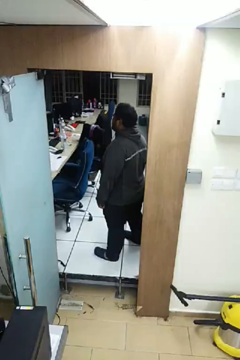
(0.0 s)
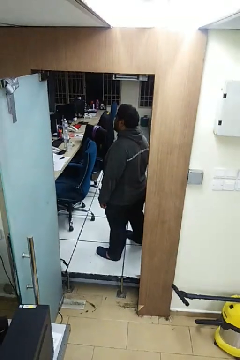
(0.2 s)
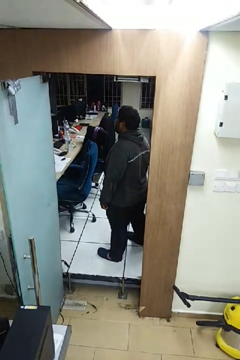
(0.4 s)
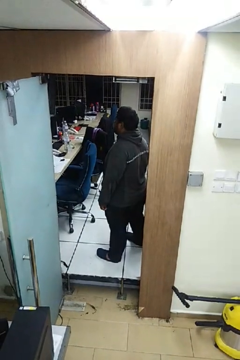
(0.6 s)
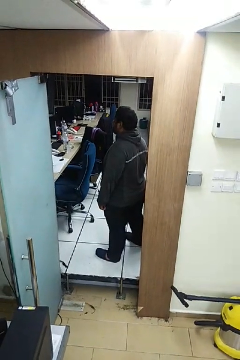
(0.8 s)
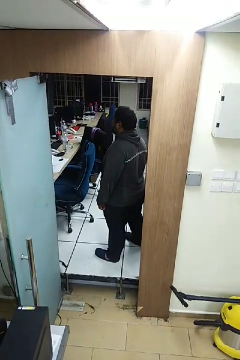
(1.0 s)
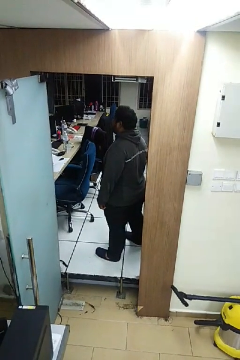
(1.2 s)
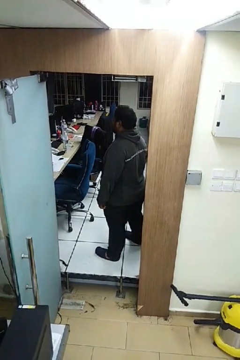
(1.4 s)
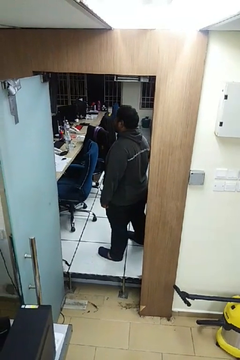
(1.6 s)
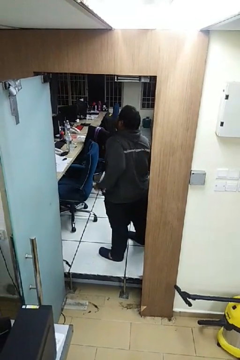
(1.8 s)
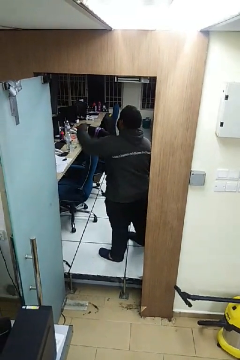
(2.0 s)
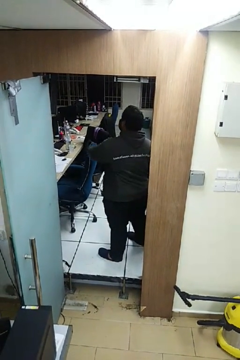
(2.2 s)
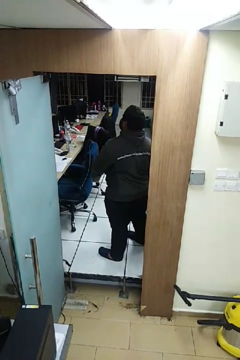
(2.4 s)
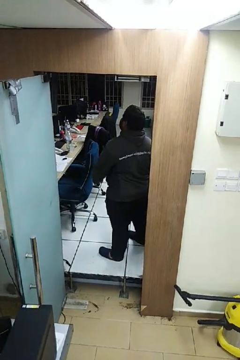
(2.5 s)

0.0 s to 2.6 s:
person punches

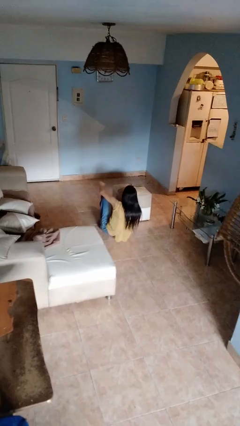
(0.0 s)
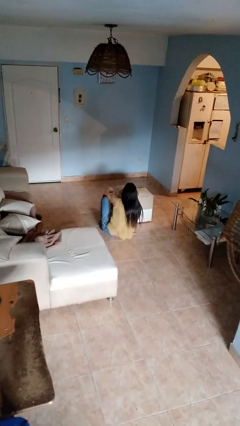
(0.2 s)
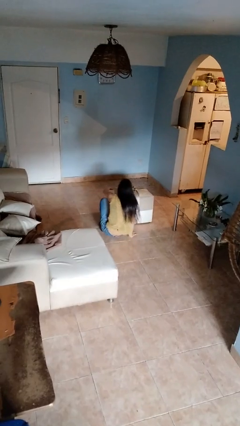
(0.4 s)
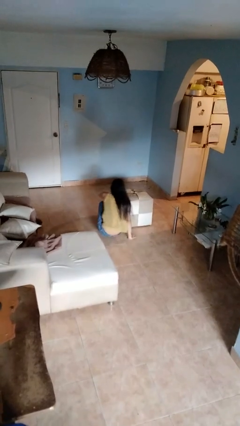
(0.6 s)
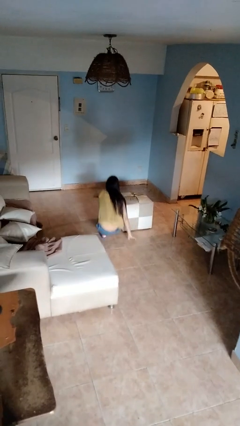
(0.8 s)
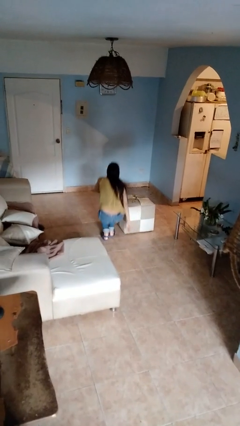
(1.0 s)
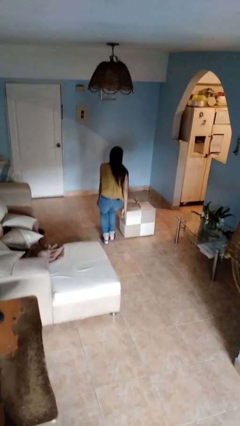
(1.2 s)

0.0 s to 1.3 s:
person stands up from floor

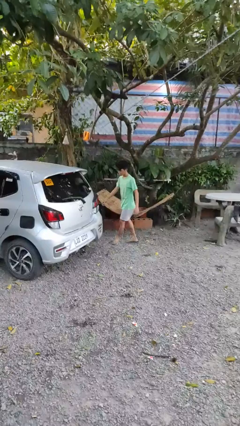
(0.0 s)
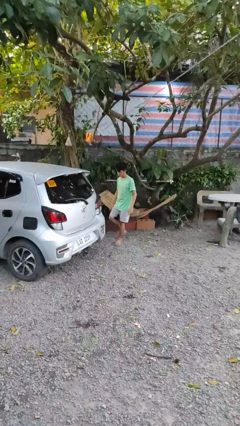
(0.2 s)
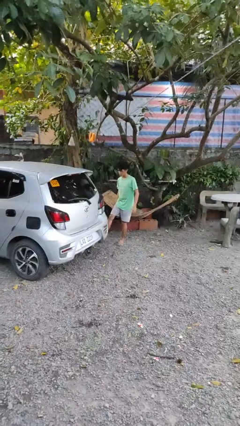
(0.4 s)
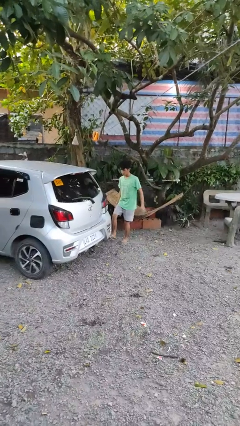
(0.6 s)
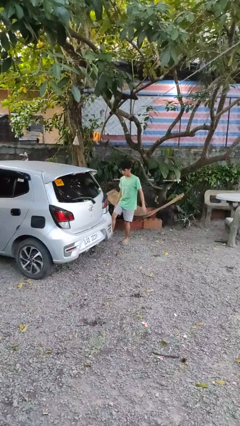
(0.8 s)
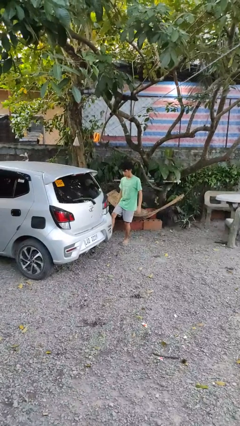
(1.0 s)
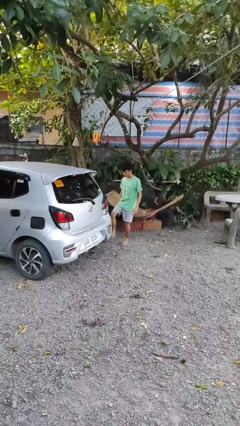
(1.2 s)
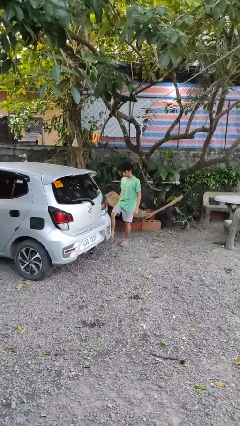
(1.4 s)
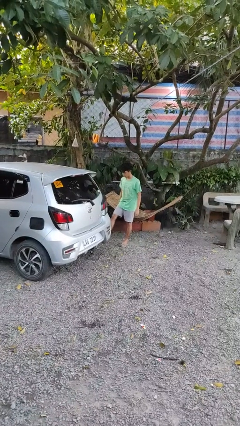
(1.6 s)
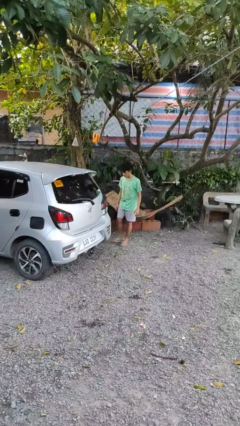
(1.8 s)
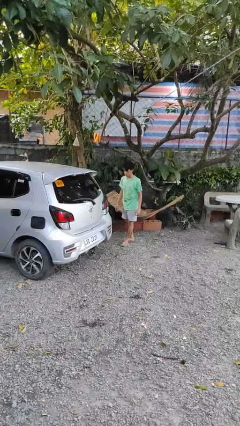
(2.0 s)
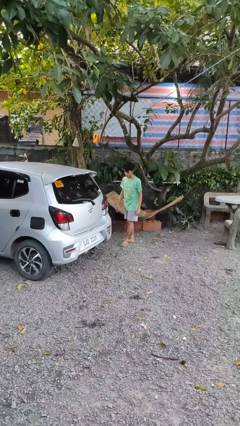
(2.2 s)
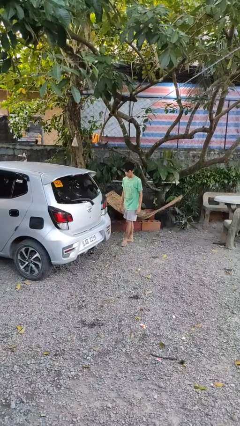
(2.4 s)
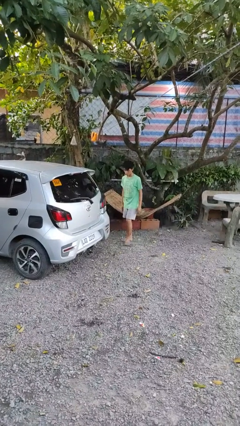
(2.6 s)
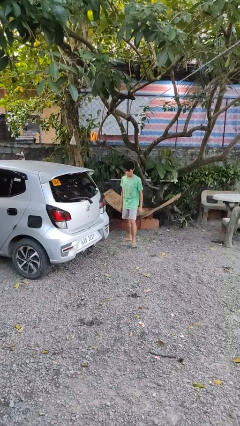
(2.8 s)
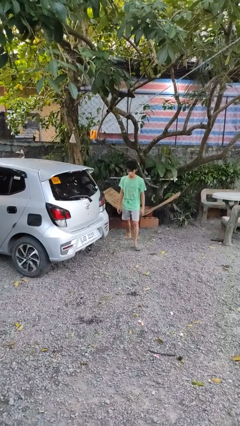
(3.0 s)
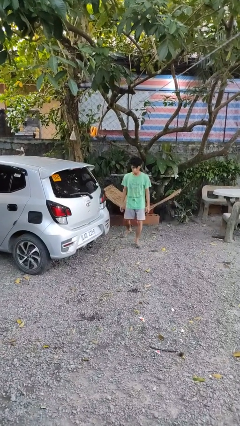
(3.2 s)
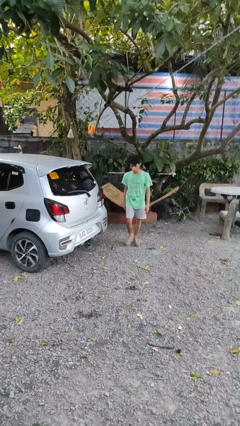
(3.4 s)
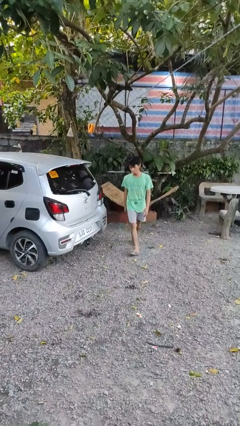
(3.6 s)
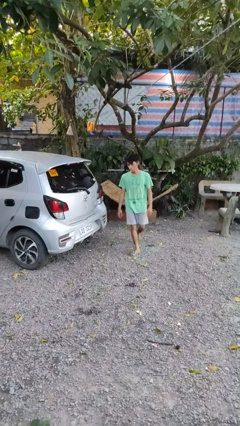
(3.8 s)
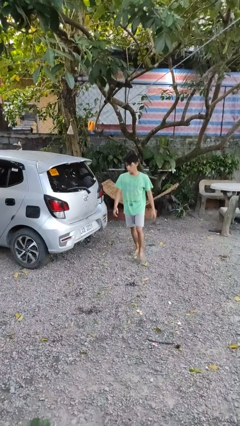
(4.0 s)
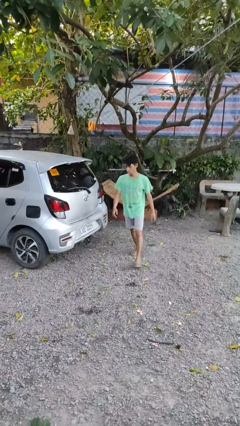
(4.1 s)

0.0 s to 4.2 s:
person kicks car tires

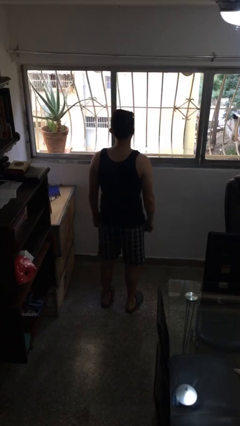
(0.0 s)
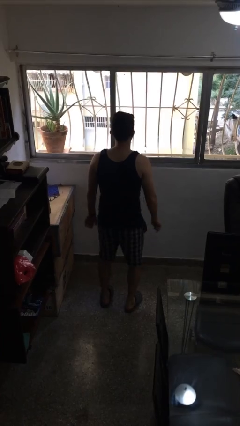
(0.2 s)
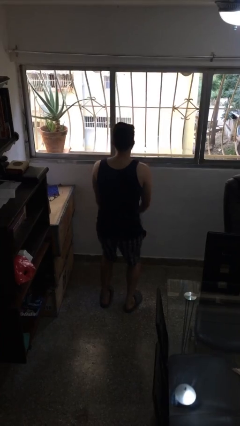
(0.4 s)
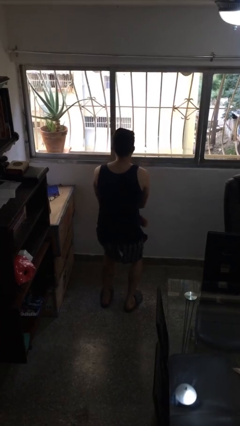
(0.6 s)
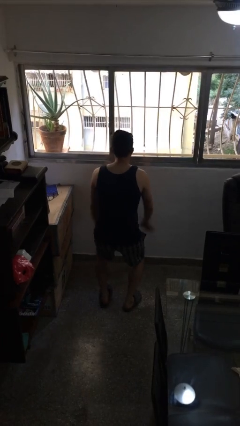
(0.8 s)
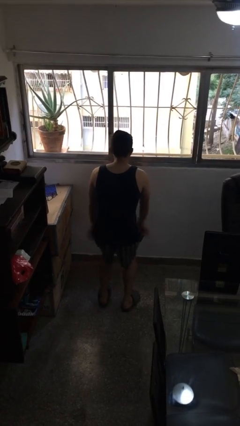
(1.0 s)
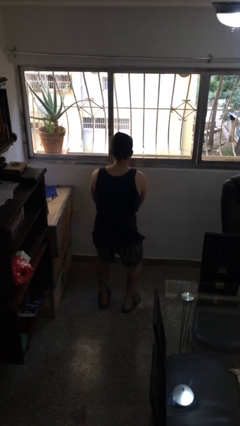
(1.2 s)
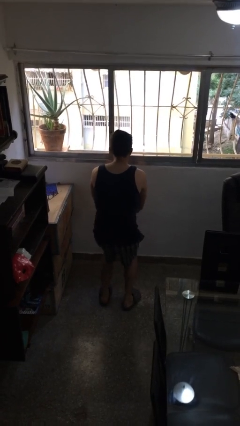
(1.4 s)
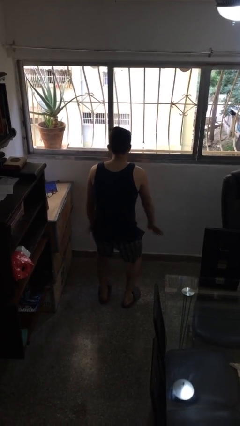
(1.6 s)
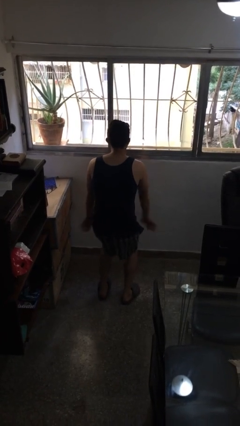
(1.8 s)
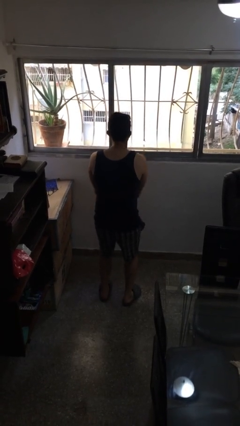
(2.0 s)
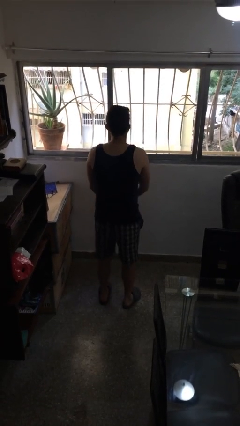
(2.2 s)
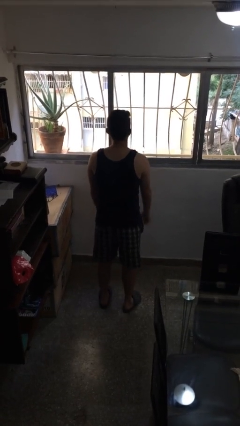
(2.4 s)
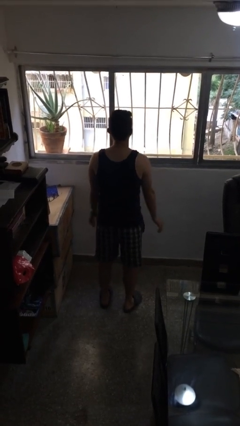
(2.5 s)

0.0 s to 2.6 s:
person dances in place

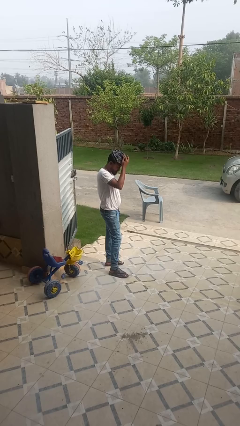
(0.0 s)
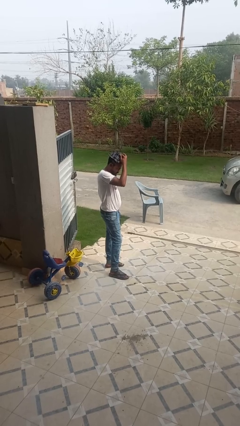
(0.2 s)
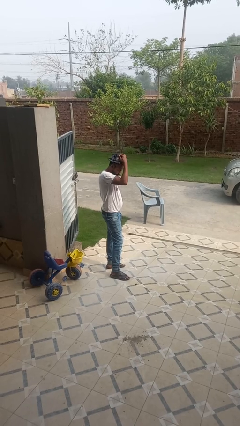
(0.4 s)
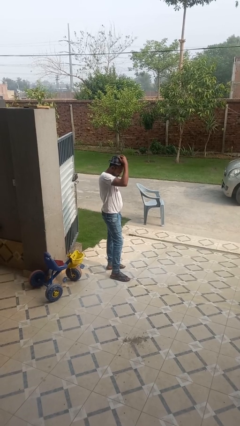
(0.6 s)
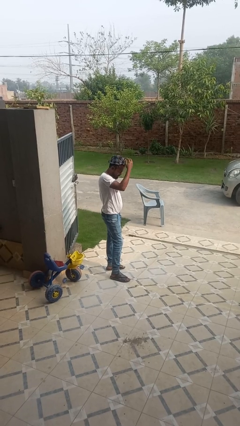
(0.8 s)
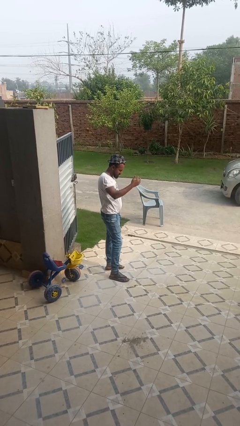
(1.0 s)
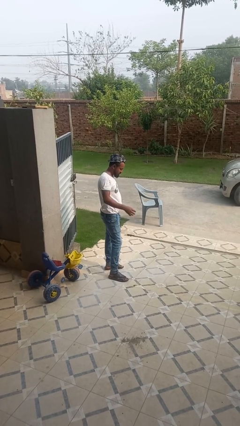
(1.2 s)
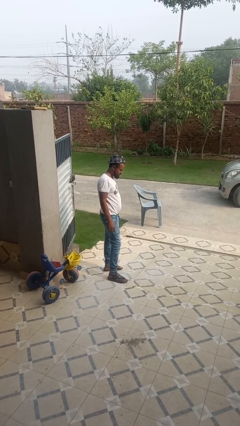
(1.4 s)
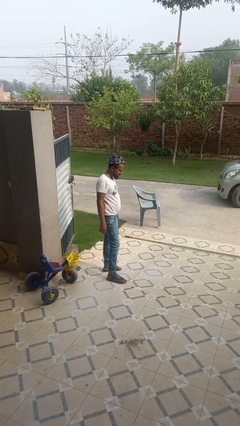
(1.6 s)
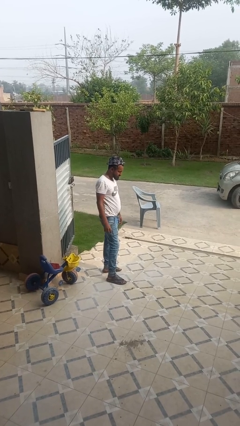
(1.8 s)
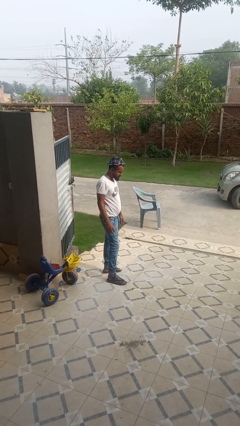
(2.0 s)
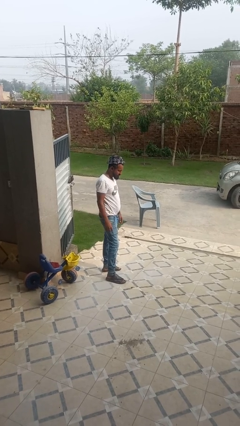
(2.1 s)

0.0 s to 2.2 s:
person puts on hat

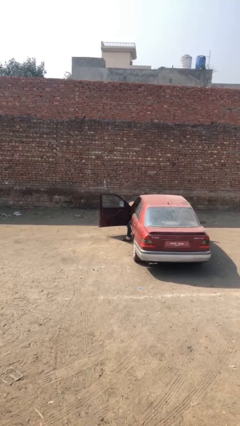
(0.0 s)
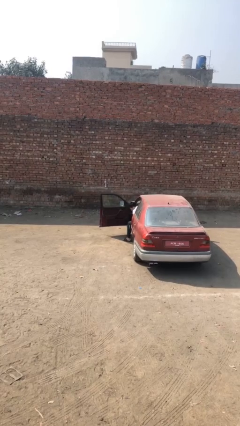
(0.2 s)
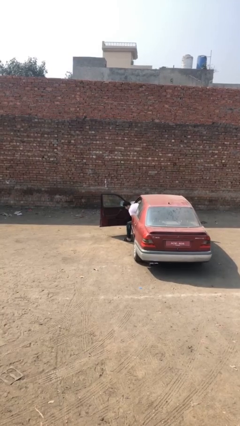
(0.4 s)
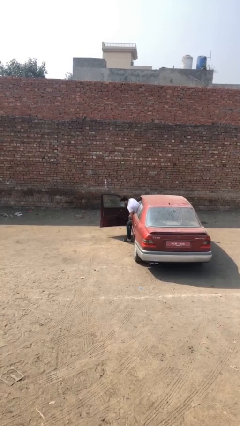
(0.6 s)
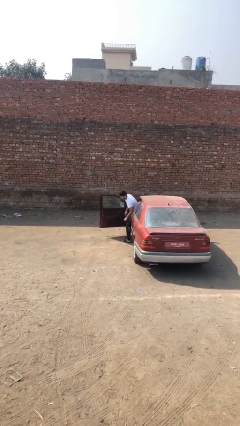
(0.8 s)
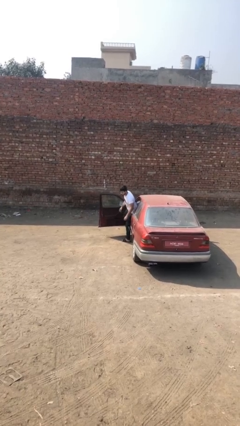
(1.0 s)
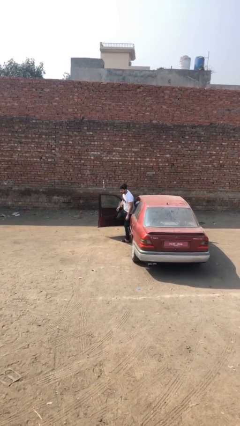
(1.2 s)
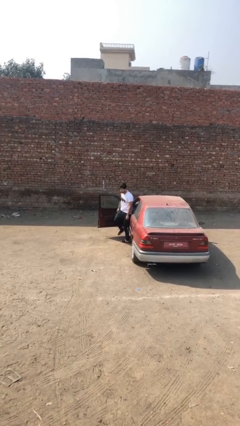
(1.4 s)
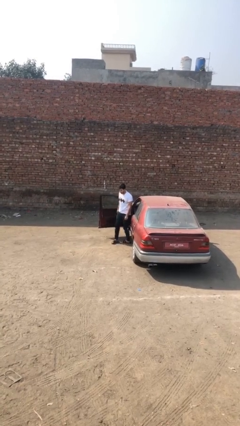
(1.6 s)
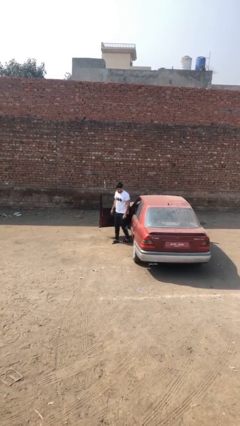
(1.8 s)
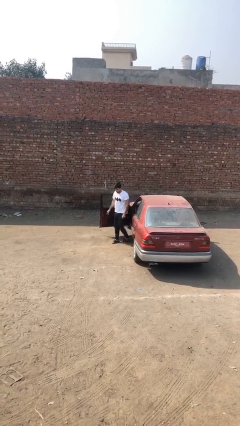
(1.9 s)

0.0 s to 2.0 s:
person exits car

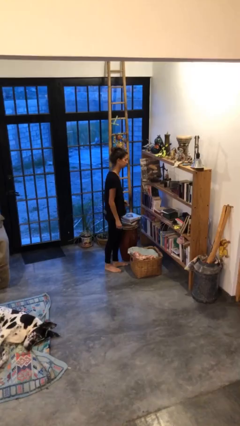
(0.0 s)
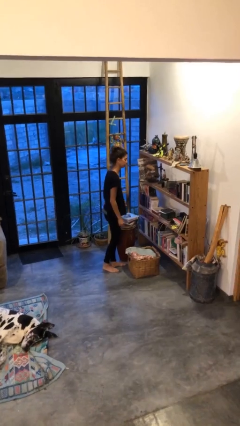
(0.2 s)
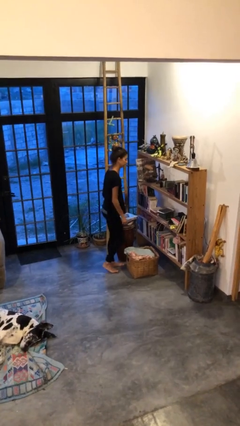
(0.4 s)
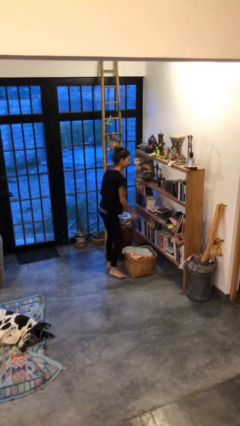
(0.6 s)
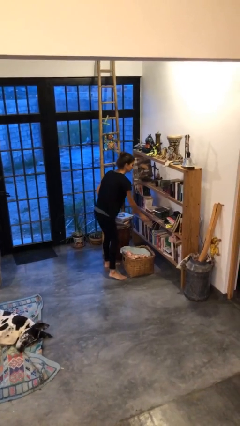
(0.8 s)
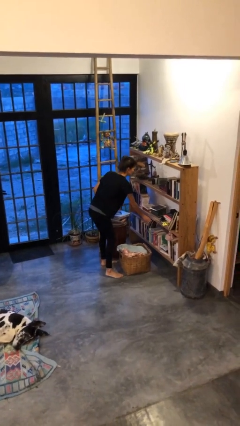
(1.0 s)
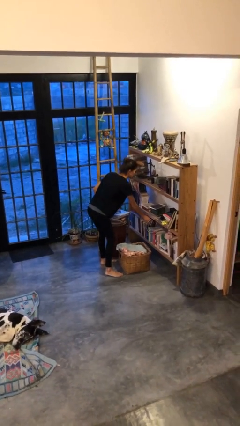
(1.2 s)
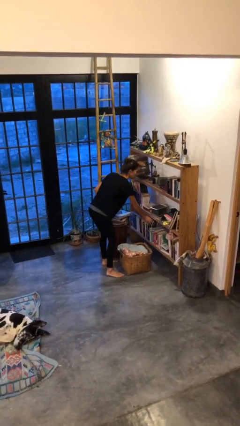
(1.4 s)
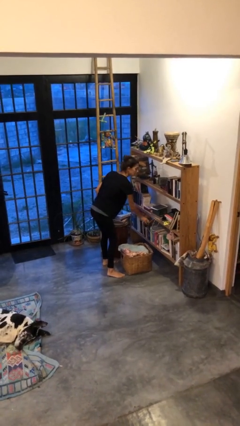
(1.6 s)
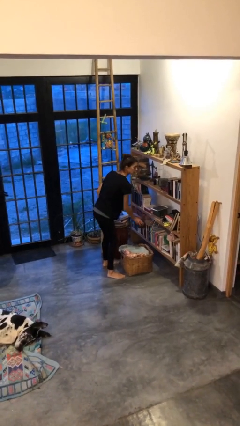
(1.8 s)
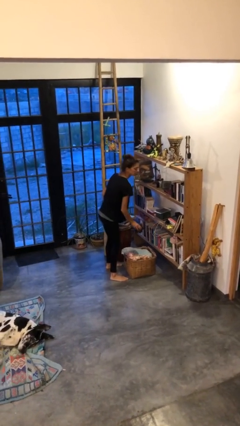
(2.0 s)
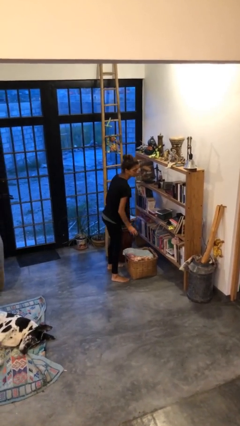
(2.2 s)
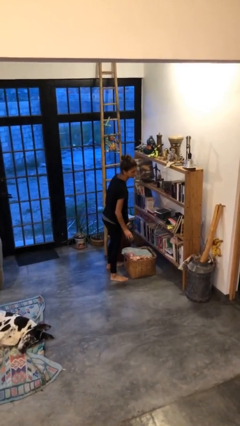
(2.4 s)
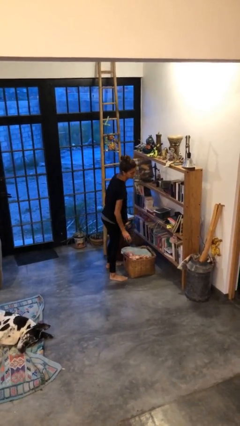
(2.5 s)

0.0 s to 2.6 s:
person picks up object from cabinet
